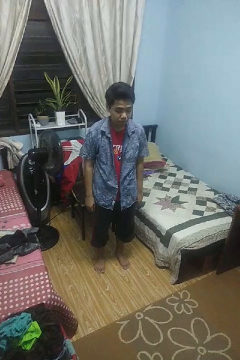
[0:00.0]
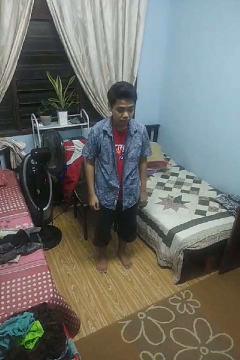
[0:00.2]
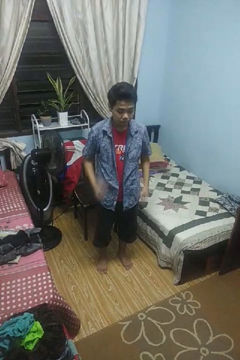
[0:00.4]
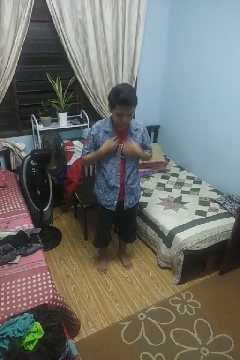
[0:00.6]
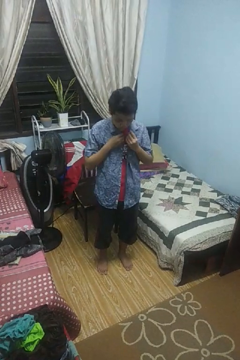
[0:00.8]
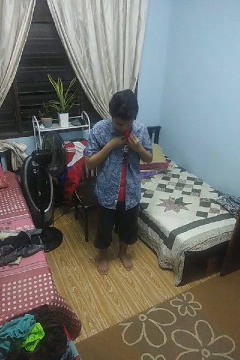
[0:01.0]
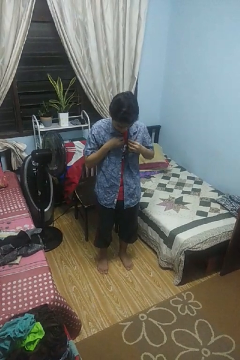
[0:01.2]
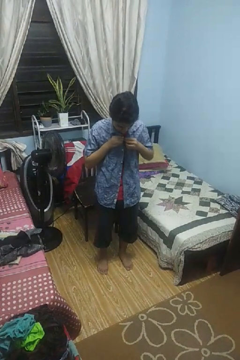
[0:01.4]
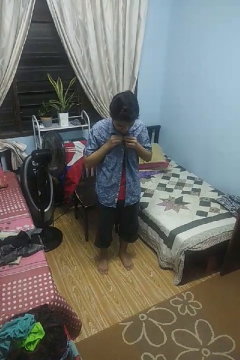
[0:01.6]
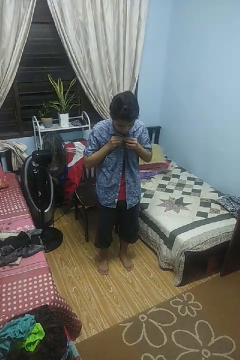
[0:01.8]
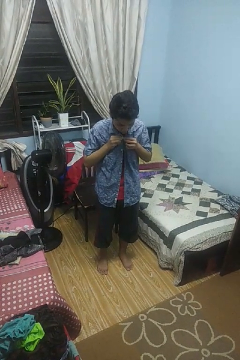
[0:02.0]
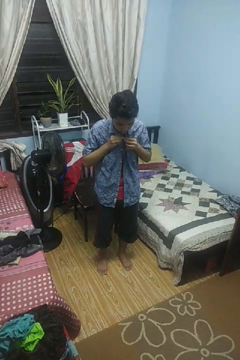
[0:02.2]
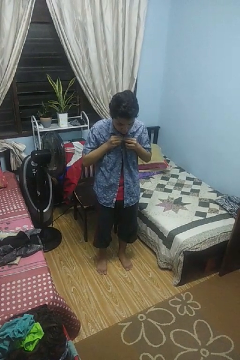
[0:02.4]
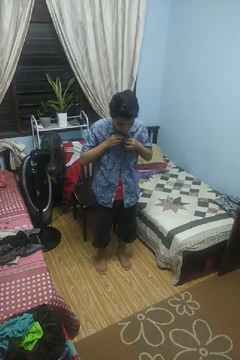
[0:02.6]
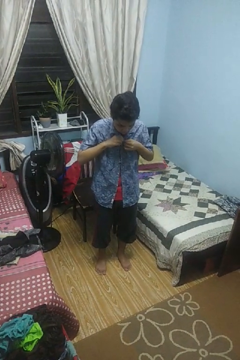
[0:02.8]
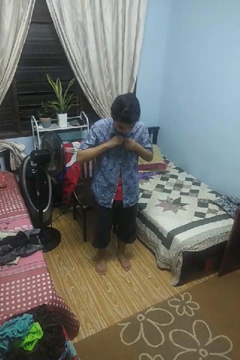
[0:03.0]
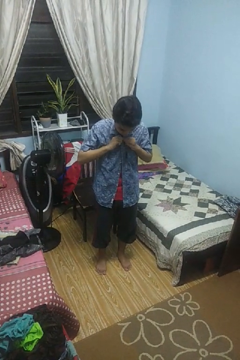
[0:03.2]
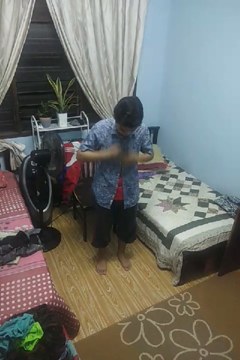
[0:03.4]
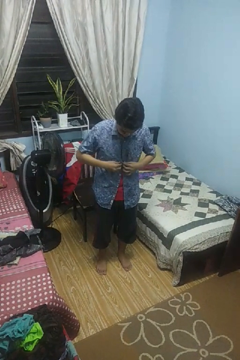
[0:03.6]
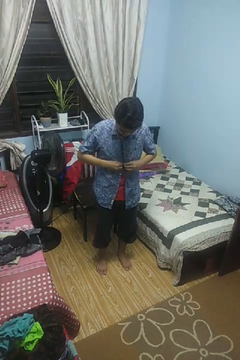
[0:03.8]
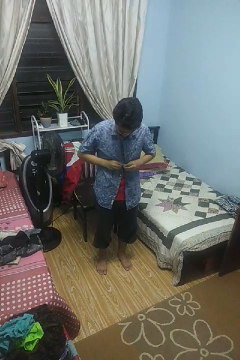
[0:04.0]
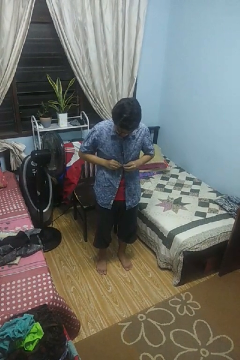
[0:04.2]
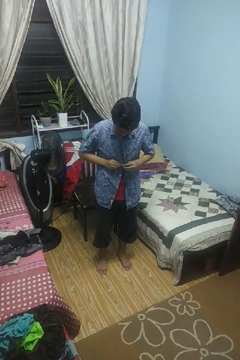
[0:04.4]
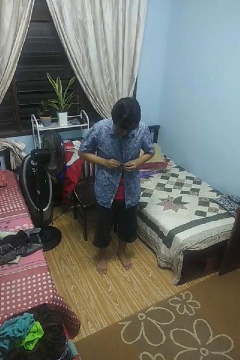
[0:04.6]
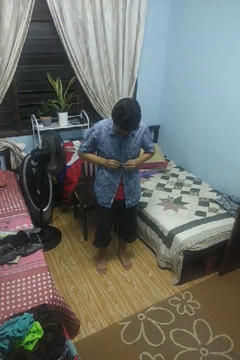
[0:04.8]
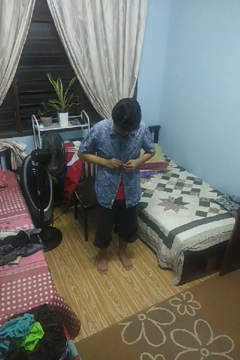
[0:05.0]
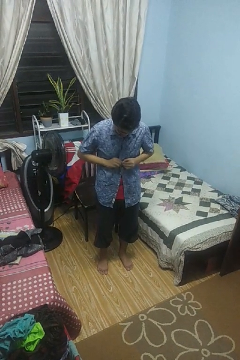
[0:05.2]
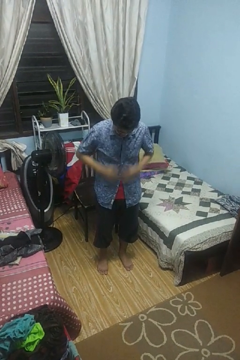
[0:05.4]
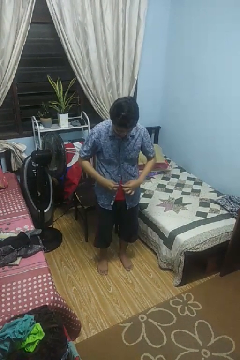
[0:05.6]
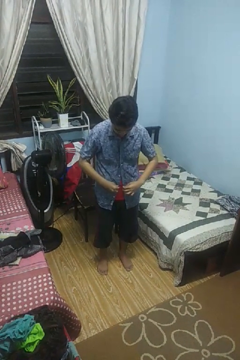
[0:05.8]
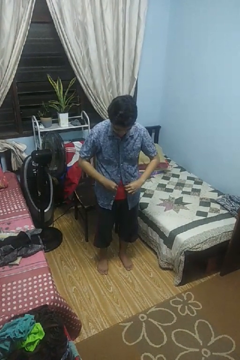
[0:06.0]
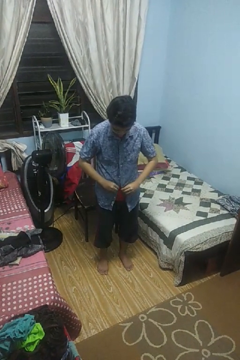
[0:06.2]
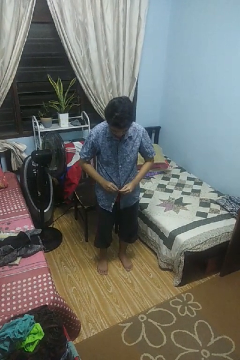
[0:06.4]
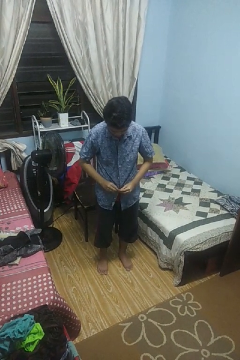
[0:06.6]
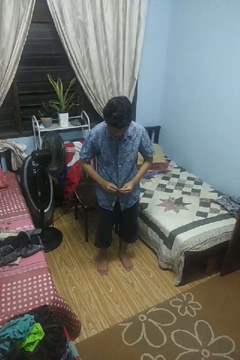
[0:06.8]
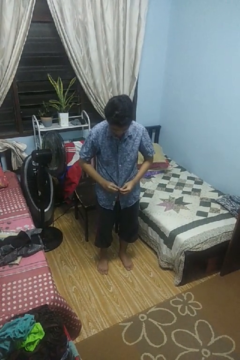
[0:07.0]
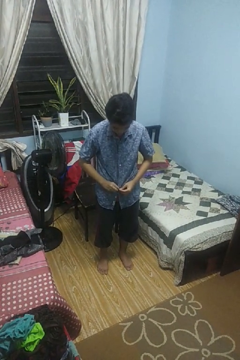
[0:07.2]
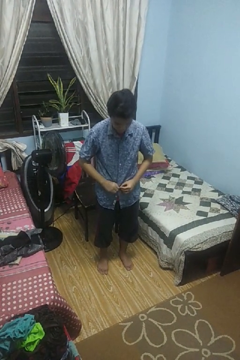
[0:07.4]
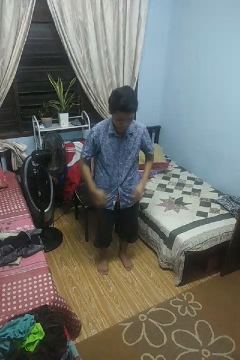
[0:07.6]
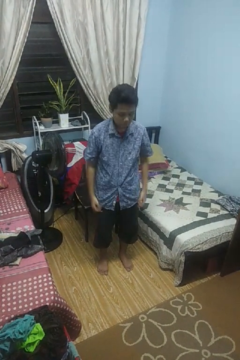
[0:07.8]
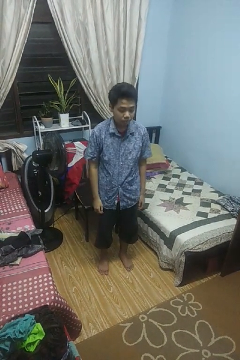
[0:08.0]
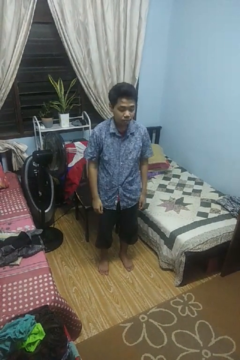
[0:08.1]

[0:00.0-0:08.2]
person buttons shirt

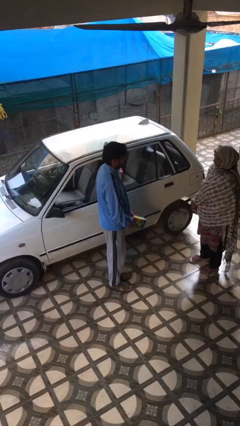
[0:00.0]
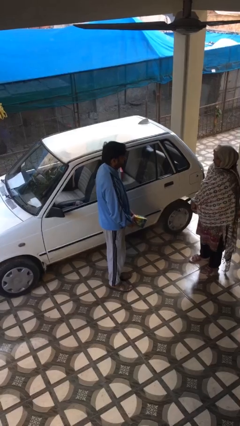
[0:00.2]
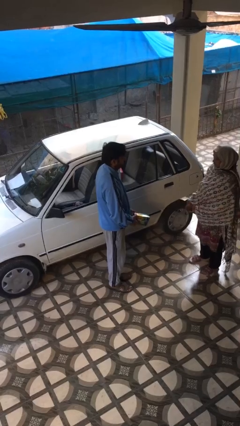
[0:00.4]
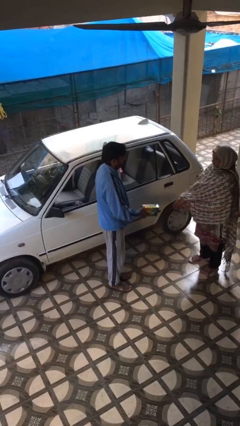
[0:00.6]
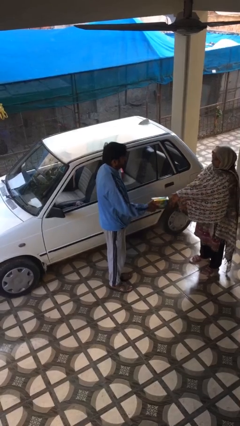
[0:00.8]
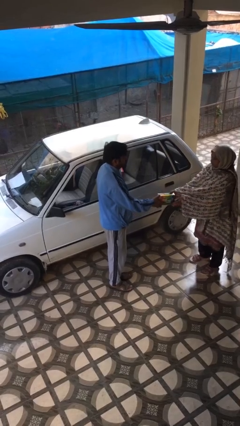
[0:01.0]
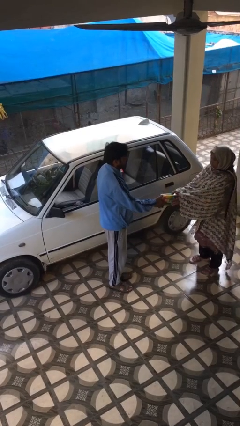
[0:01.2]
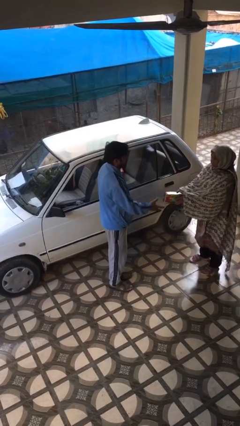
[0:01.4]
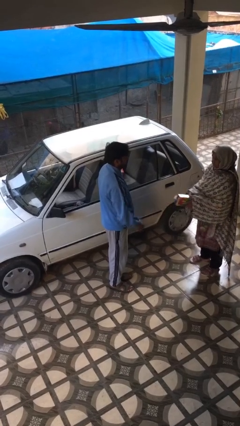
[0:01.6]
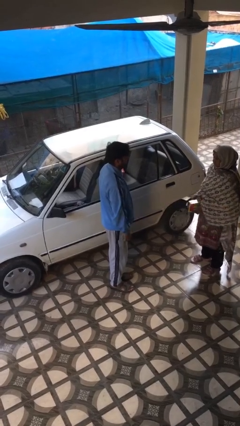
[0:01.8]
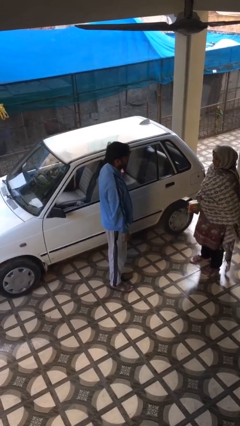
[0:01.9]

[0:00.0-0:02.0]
person transfers object to person

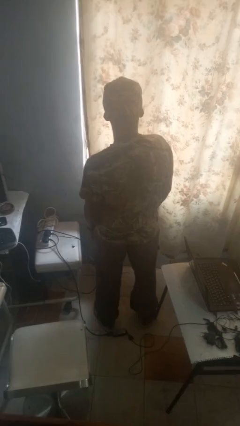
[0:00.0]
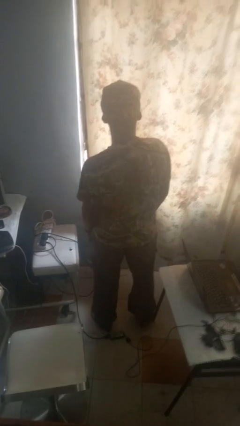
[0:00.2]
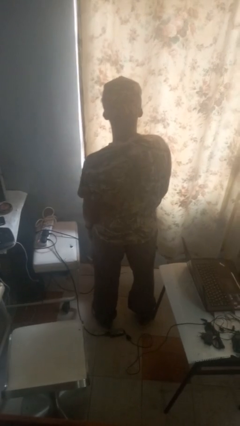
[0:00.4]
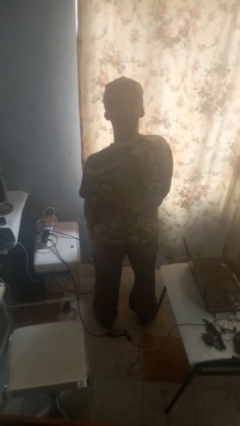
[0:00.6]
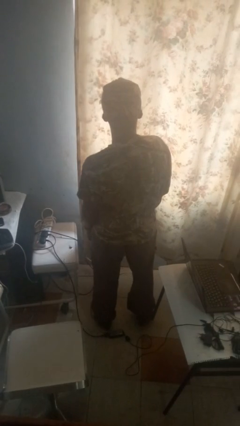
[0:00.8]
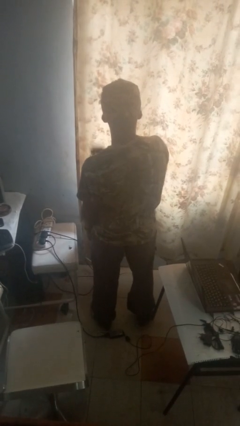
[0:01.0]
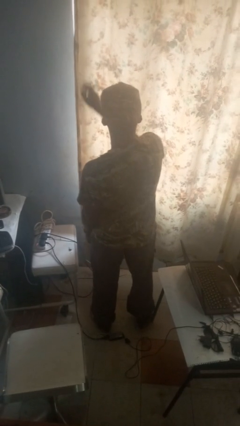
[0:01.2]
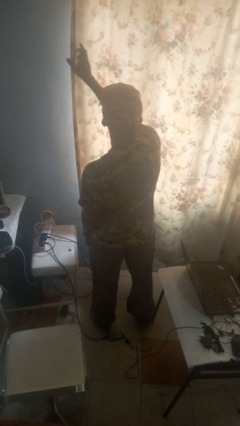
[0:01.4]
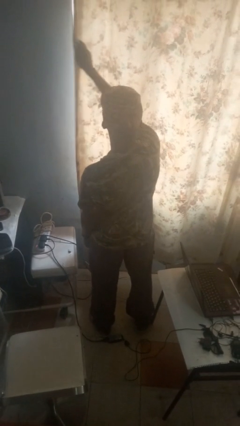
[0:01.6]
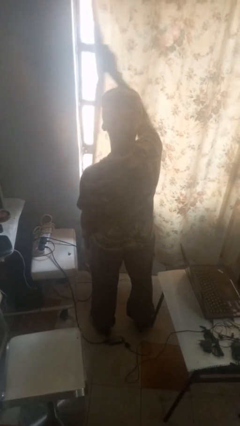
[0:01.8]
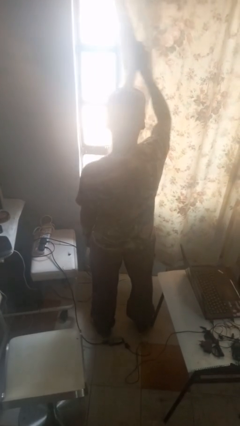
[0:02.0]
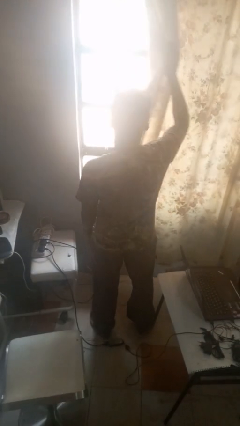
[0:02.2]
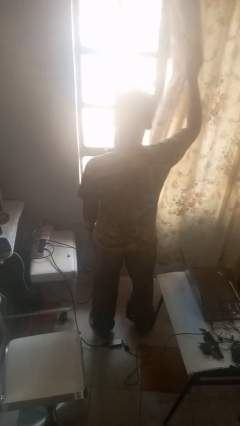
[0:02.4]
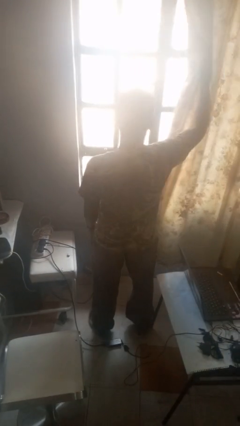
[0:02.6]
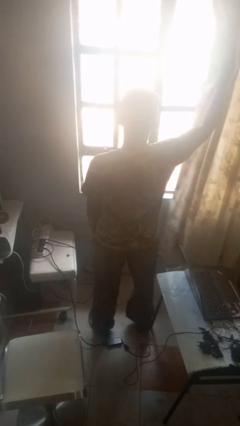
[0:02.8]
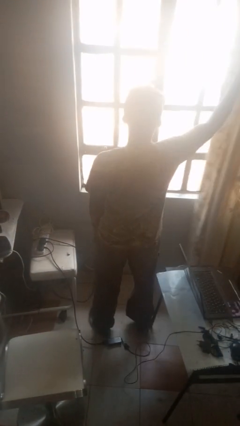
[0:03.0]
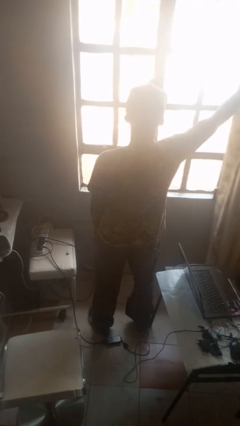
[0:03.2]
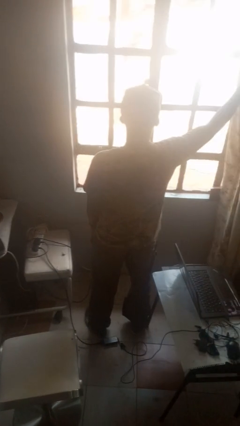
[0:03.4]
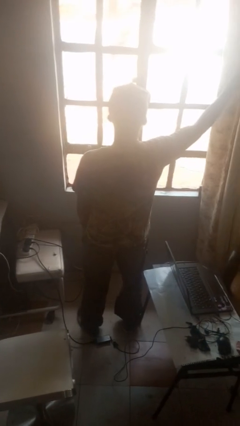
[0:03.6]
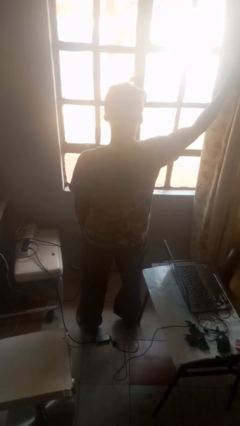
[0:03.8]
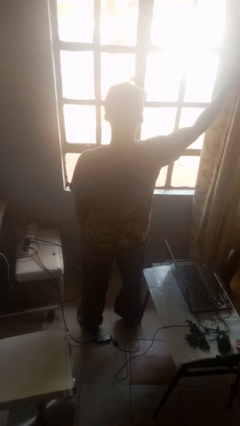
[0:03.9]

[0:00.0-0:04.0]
person opens curtains

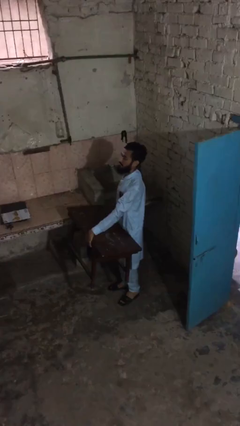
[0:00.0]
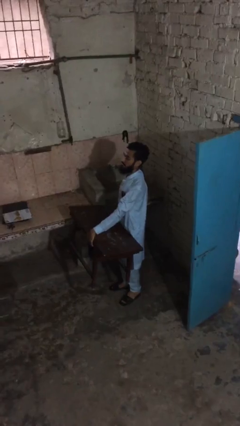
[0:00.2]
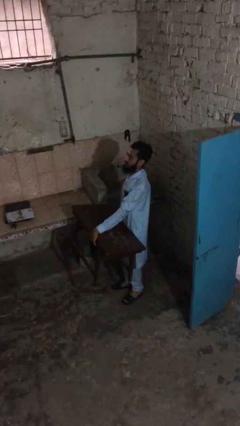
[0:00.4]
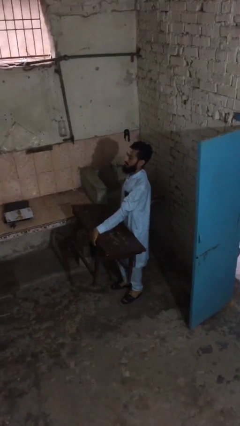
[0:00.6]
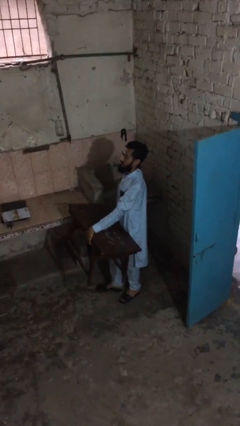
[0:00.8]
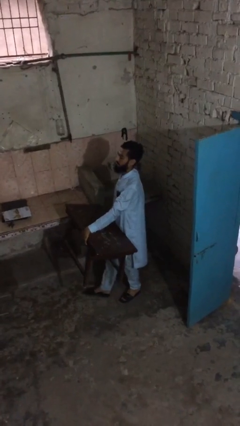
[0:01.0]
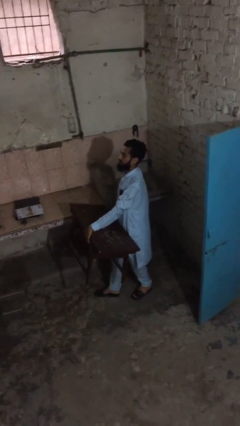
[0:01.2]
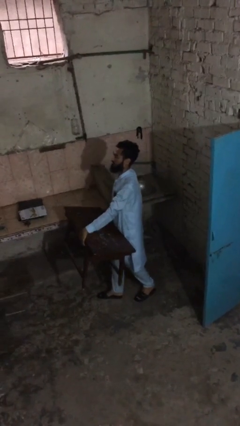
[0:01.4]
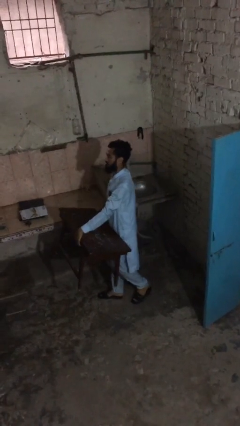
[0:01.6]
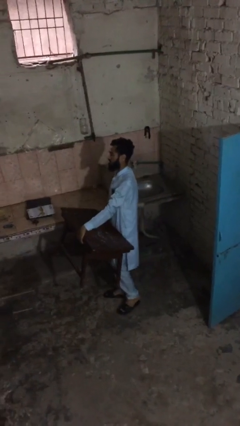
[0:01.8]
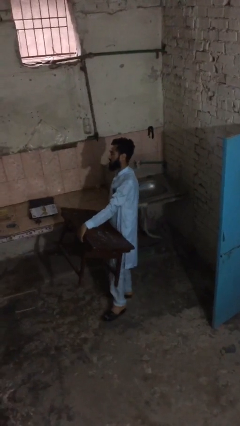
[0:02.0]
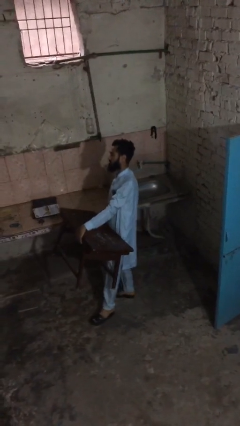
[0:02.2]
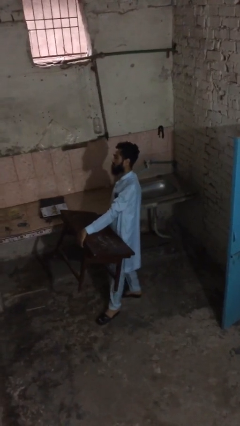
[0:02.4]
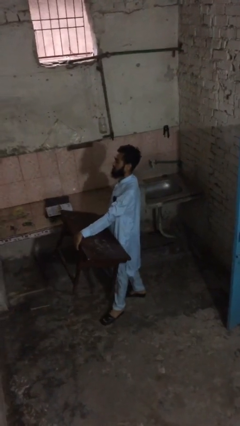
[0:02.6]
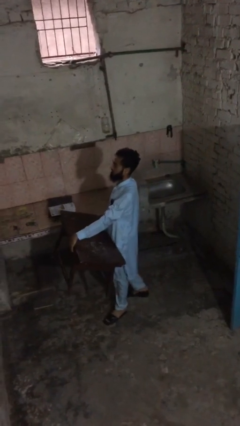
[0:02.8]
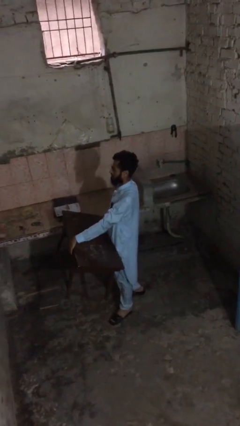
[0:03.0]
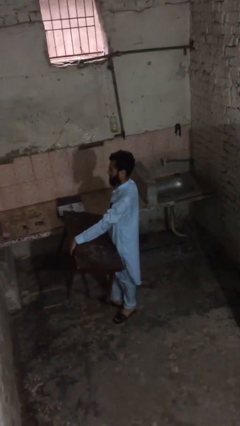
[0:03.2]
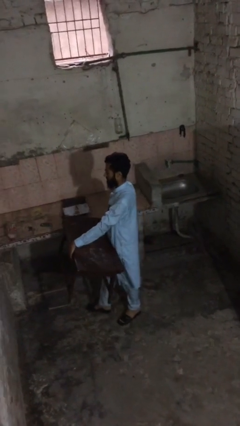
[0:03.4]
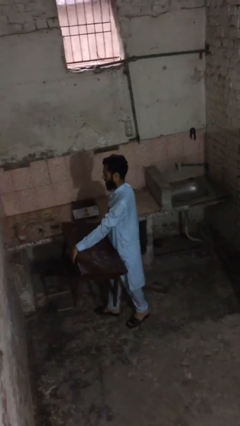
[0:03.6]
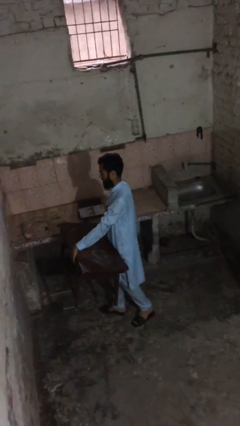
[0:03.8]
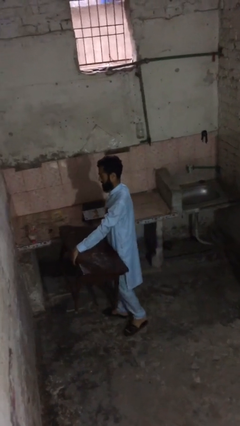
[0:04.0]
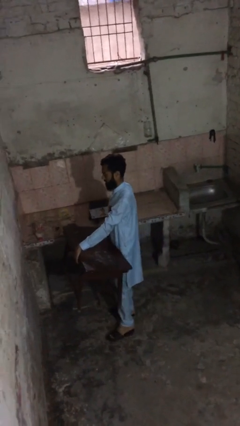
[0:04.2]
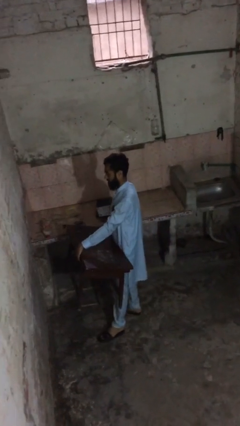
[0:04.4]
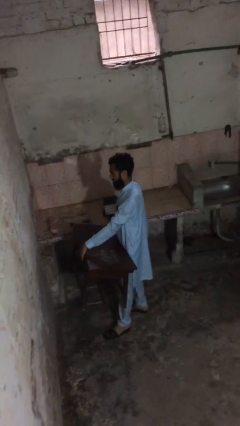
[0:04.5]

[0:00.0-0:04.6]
person carries heavy object
